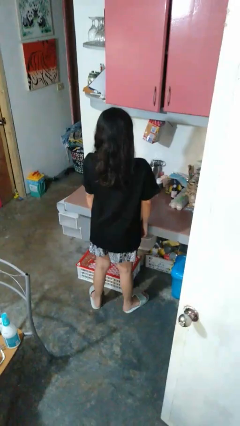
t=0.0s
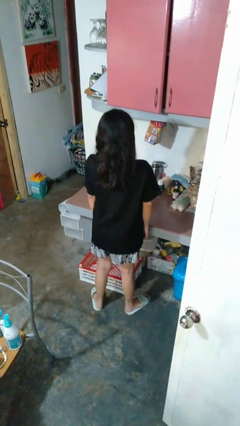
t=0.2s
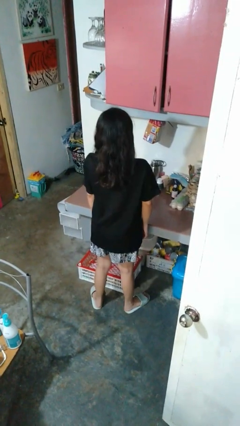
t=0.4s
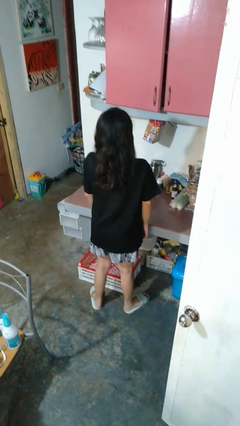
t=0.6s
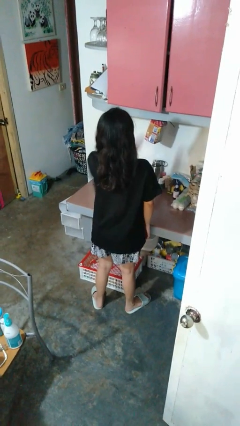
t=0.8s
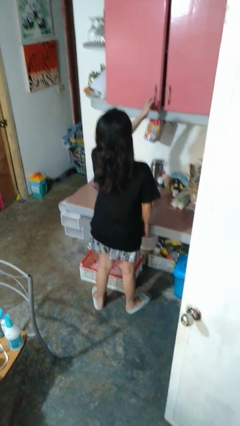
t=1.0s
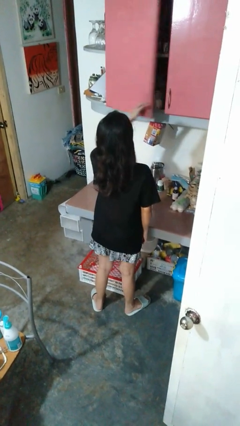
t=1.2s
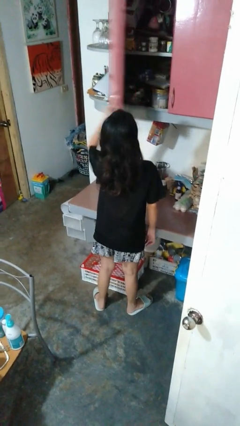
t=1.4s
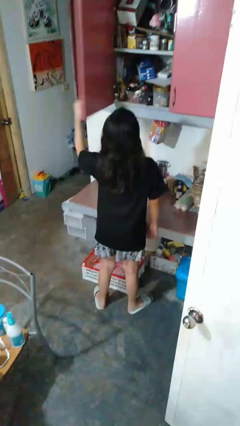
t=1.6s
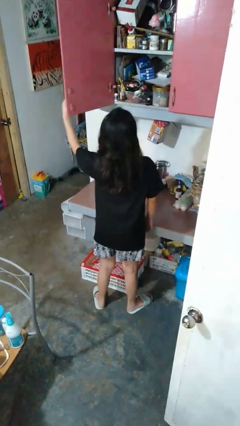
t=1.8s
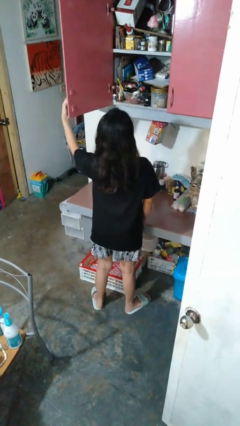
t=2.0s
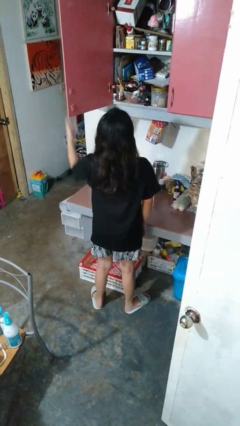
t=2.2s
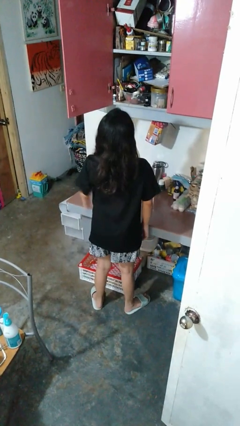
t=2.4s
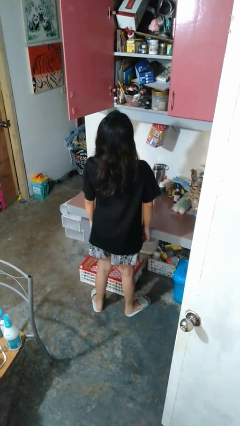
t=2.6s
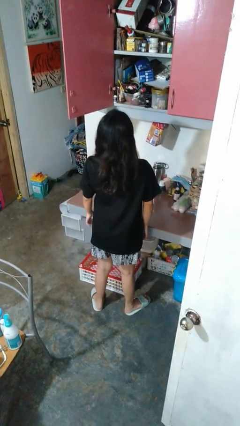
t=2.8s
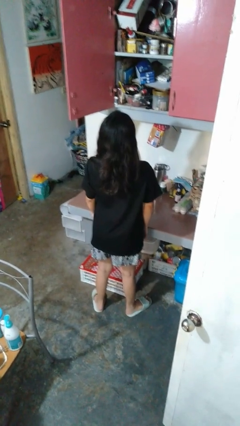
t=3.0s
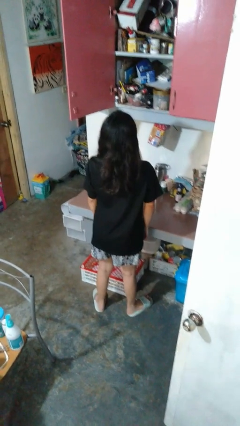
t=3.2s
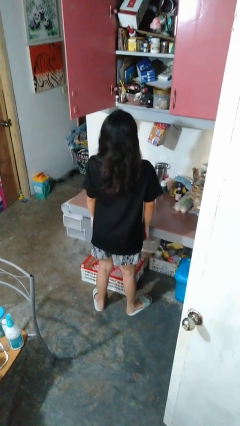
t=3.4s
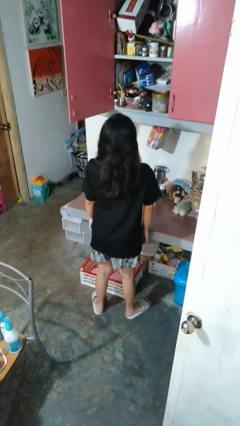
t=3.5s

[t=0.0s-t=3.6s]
person opens cabinet

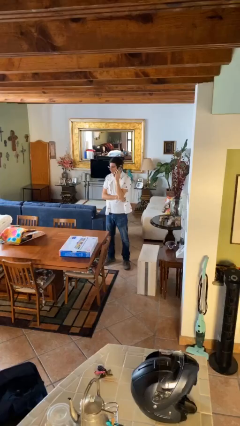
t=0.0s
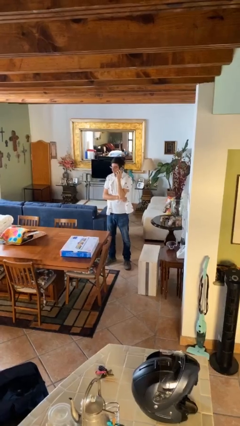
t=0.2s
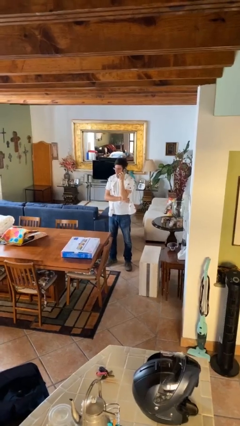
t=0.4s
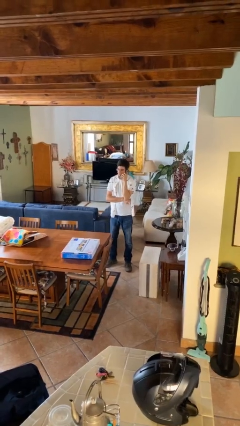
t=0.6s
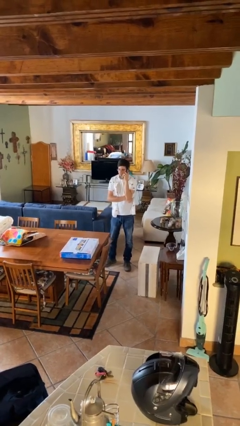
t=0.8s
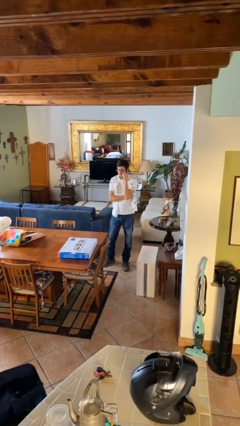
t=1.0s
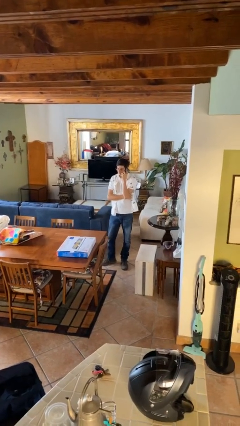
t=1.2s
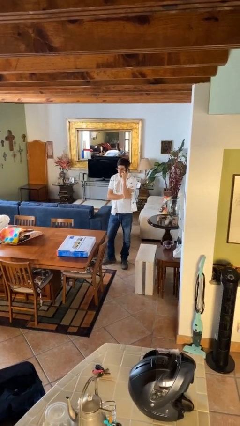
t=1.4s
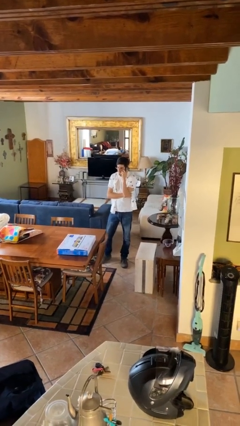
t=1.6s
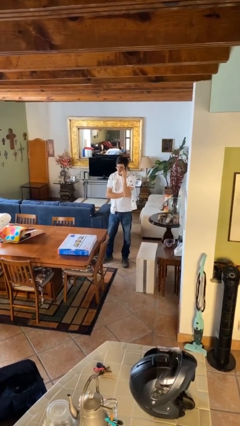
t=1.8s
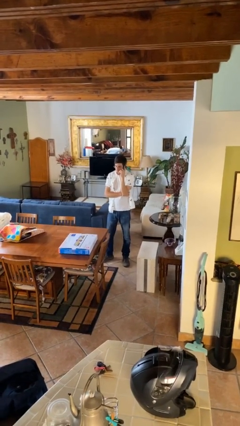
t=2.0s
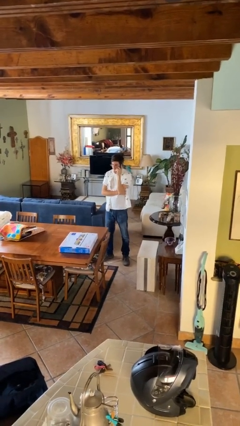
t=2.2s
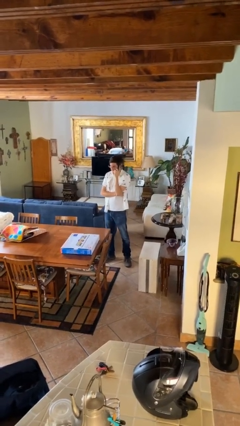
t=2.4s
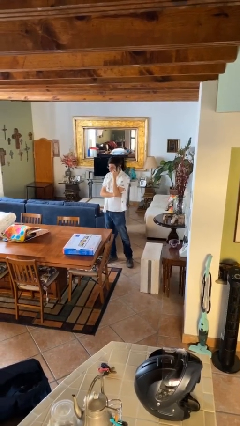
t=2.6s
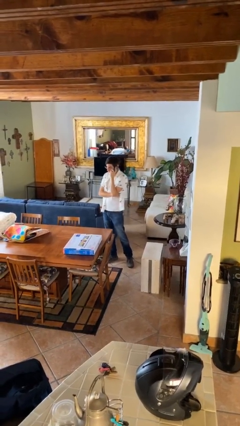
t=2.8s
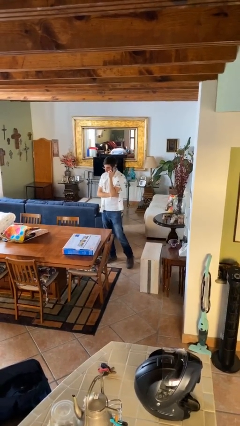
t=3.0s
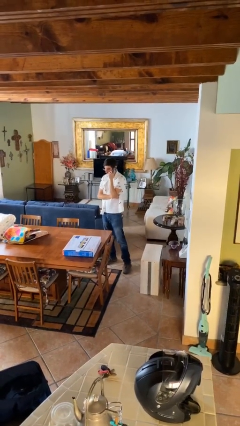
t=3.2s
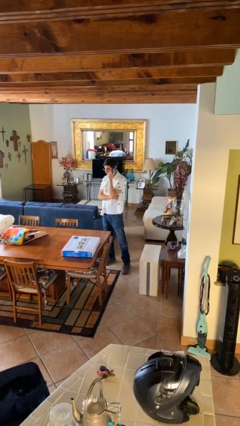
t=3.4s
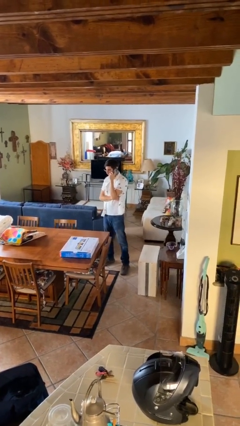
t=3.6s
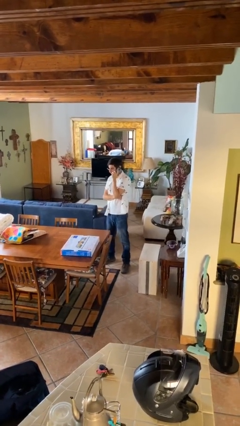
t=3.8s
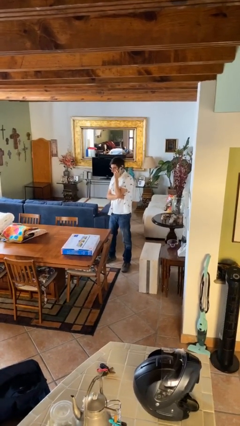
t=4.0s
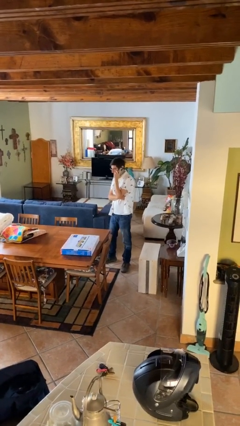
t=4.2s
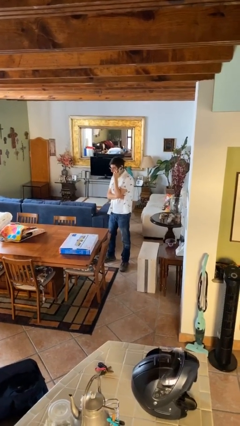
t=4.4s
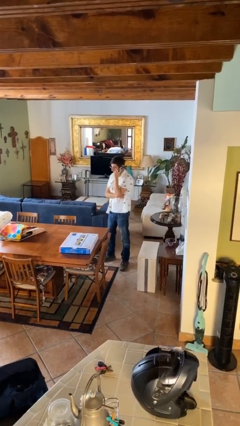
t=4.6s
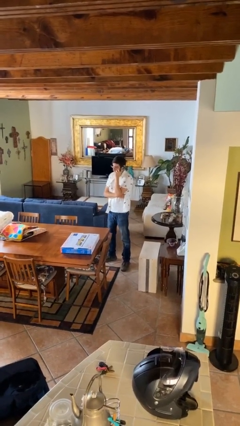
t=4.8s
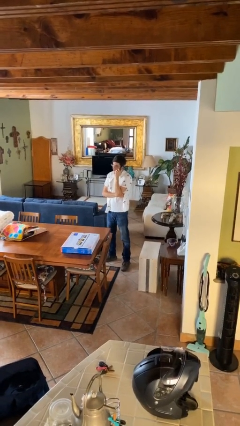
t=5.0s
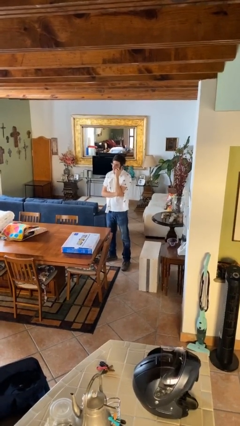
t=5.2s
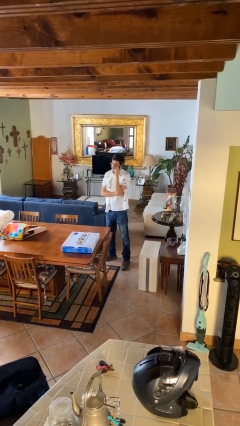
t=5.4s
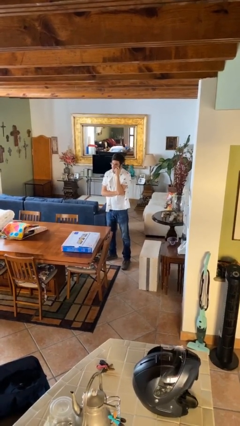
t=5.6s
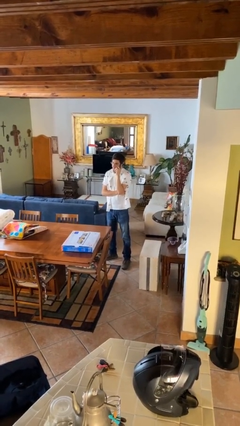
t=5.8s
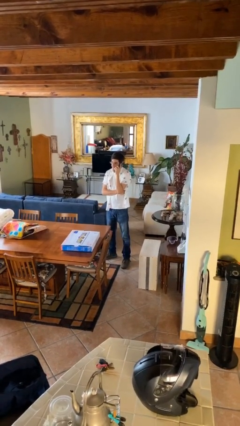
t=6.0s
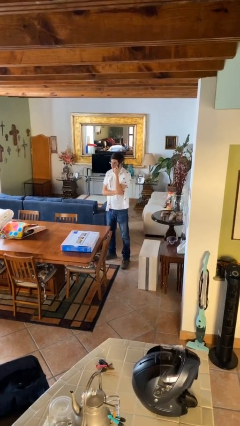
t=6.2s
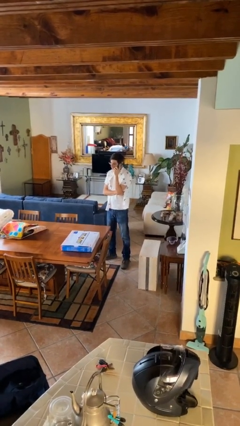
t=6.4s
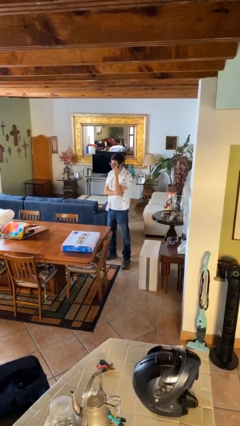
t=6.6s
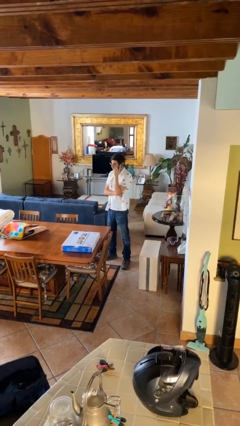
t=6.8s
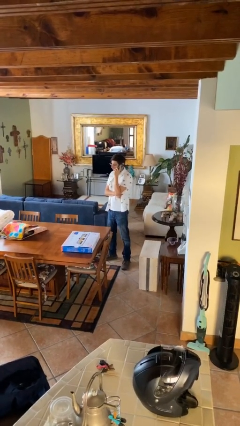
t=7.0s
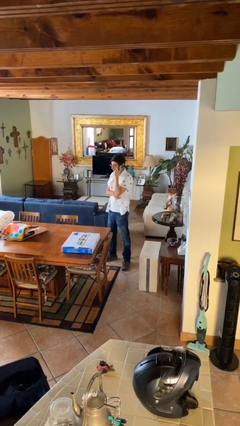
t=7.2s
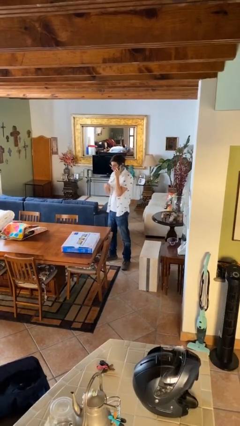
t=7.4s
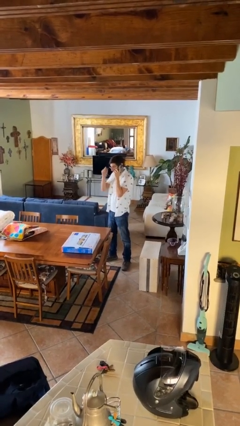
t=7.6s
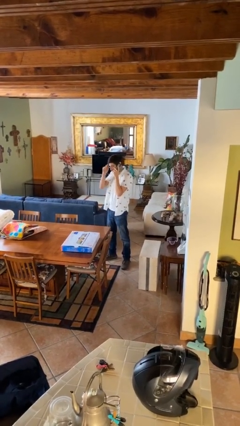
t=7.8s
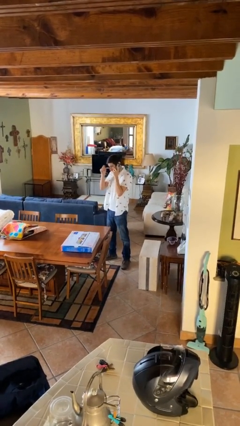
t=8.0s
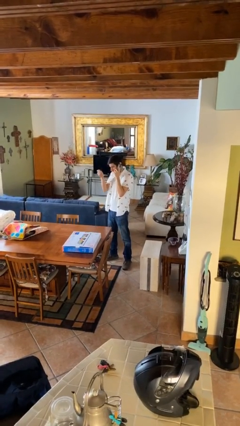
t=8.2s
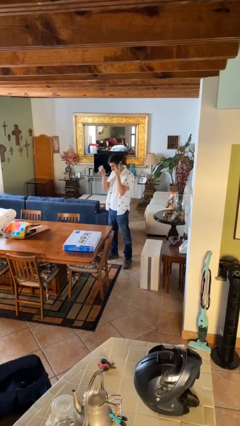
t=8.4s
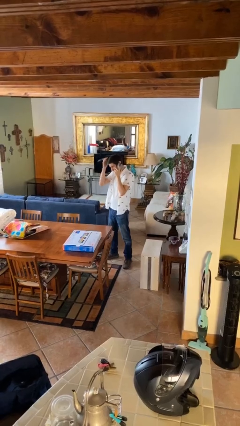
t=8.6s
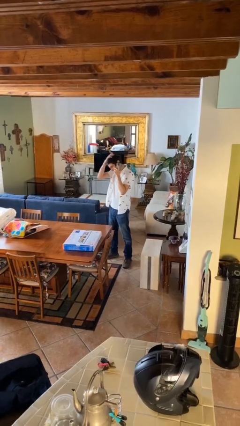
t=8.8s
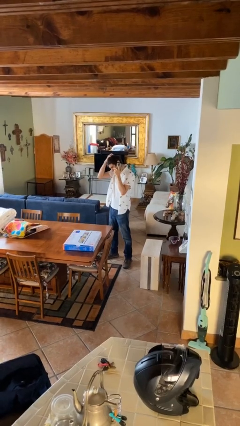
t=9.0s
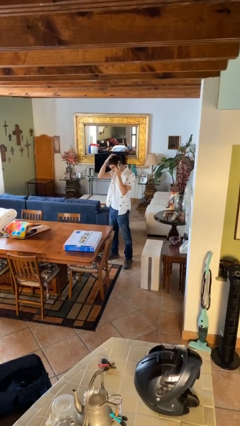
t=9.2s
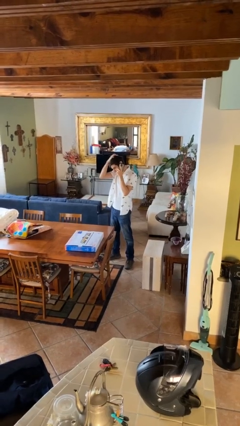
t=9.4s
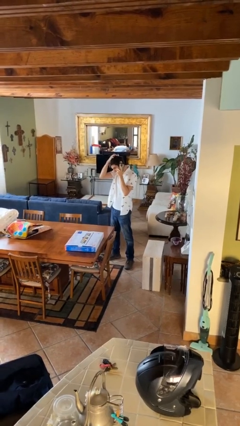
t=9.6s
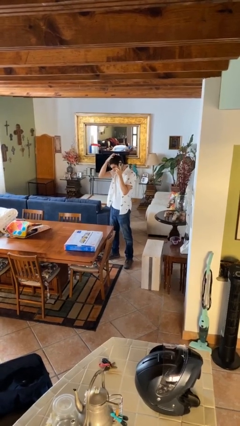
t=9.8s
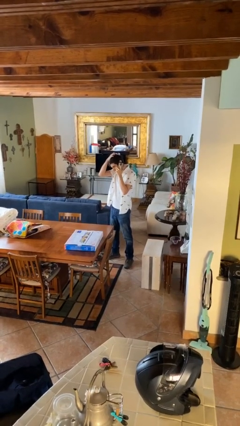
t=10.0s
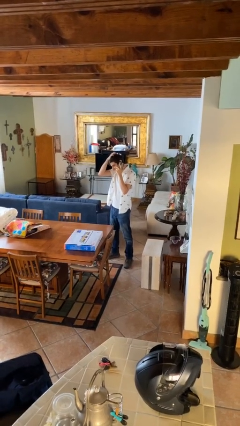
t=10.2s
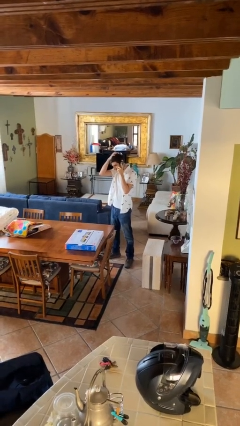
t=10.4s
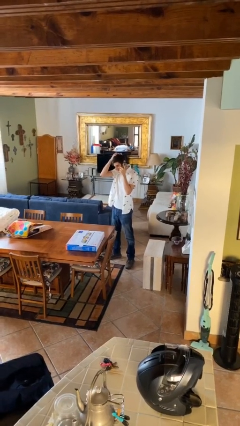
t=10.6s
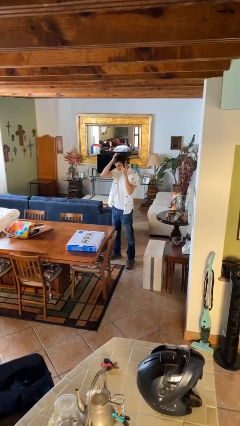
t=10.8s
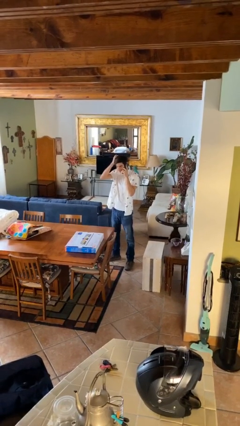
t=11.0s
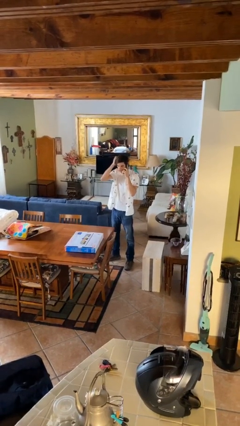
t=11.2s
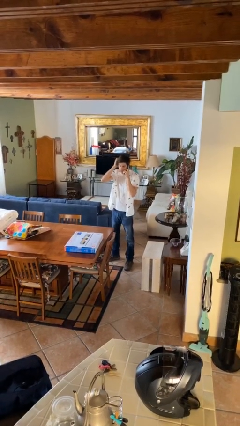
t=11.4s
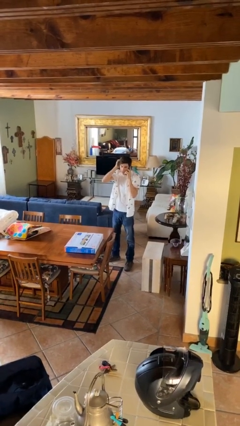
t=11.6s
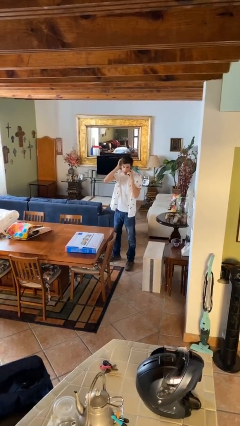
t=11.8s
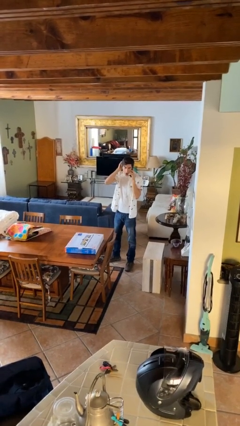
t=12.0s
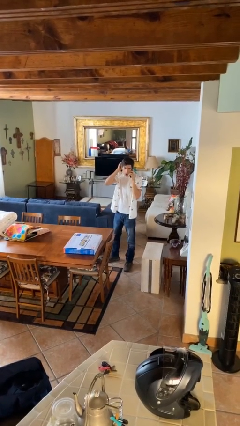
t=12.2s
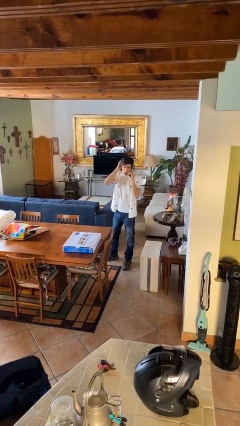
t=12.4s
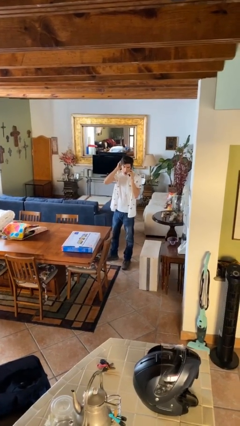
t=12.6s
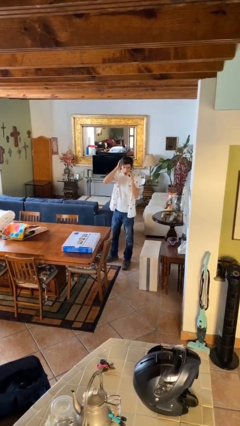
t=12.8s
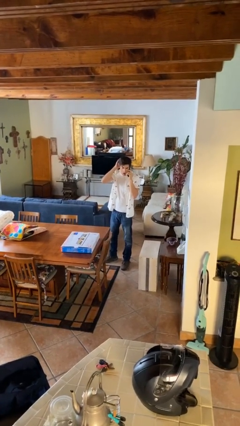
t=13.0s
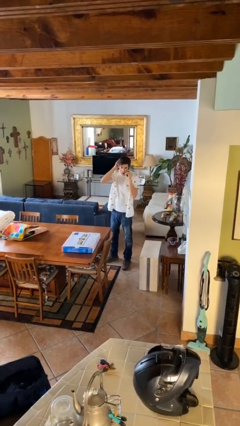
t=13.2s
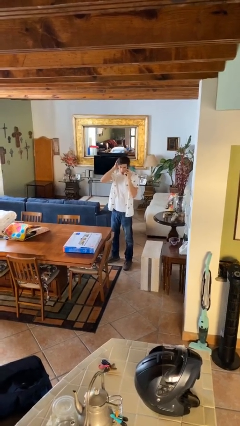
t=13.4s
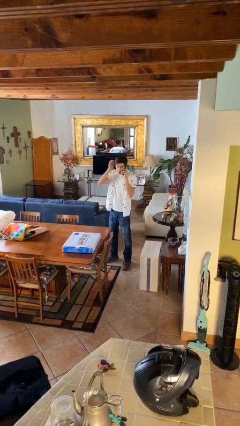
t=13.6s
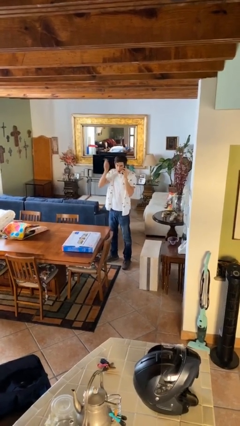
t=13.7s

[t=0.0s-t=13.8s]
person talks on phone

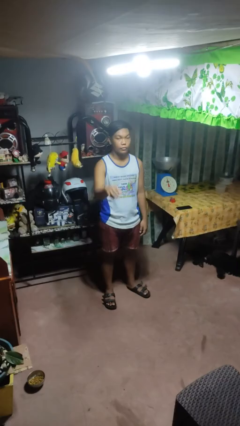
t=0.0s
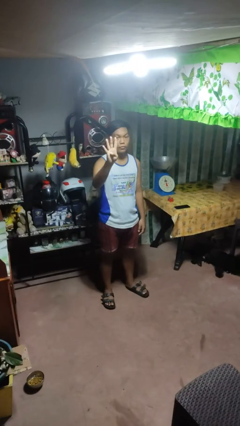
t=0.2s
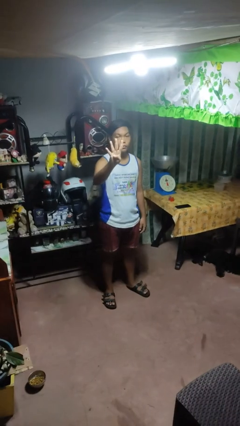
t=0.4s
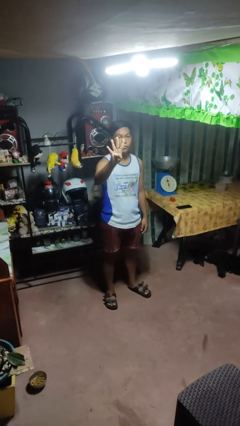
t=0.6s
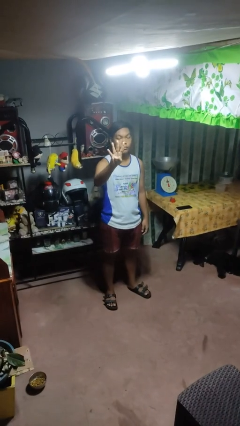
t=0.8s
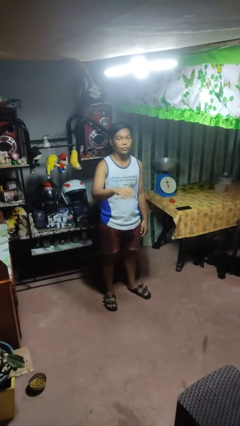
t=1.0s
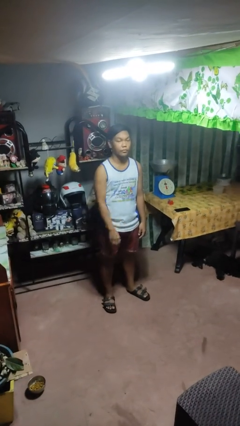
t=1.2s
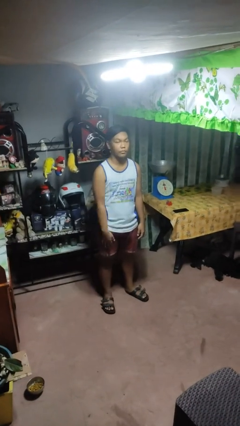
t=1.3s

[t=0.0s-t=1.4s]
person gestures number four
